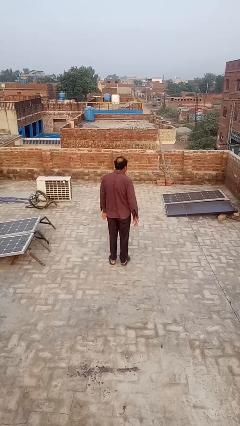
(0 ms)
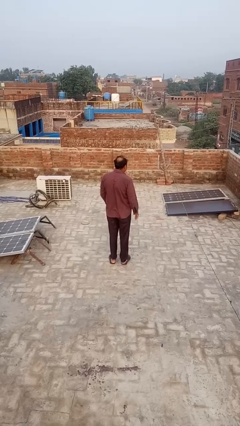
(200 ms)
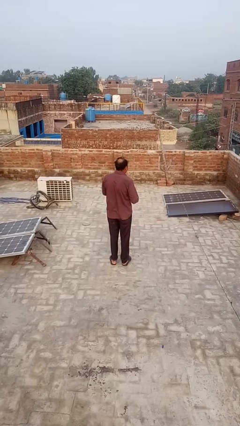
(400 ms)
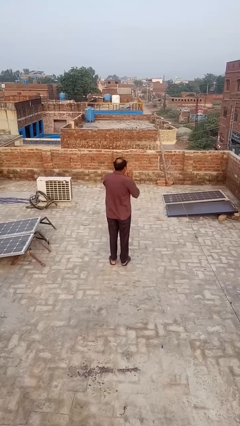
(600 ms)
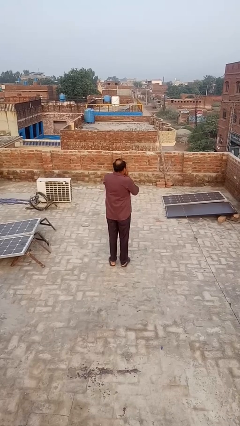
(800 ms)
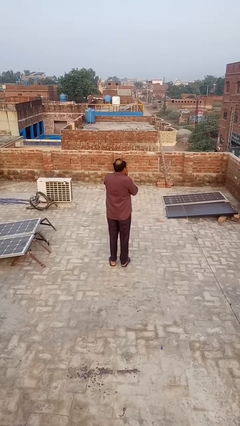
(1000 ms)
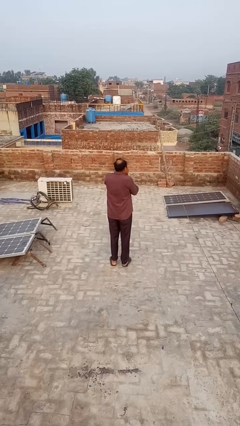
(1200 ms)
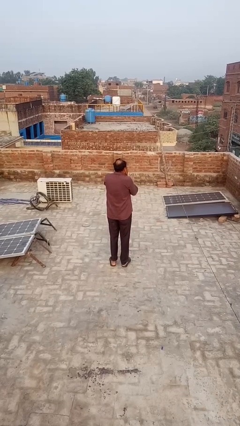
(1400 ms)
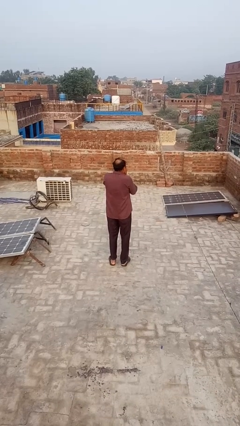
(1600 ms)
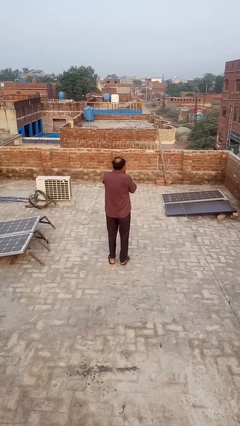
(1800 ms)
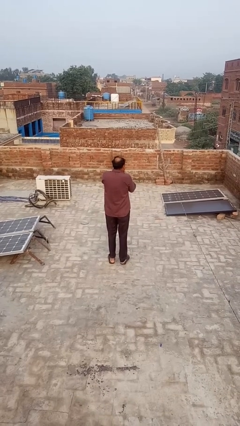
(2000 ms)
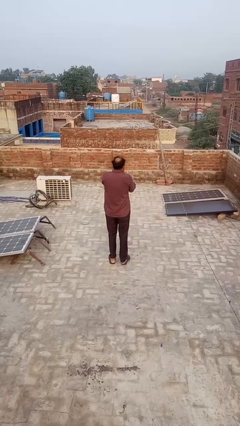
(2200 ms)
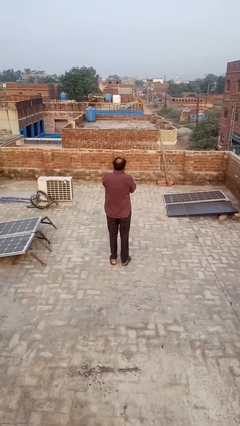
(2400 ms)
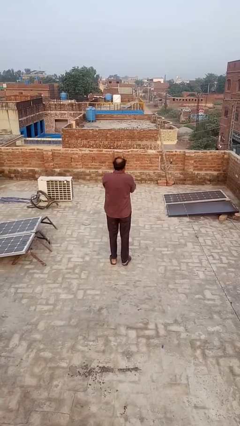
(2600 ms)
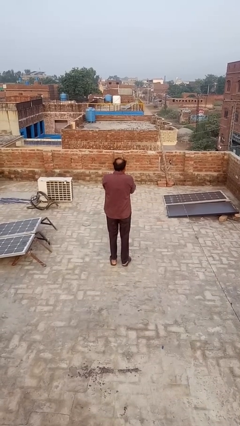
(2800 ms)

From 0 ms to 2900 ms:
person blows into hands

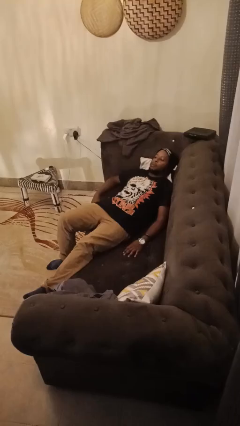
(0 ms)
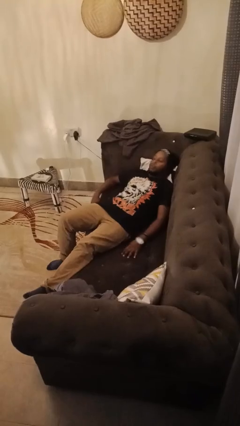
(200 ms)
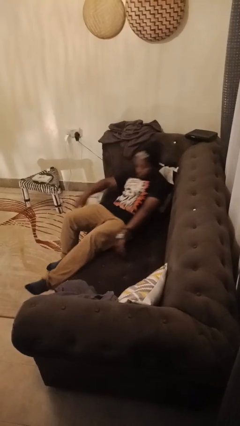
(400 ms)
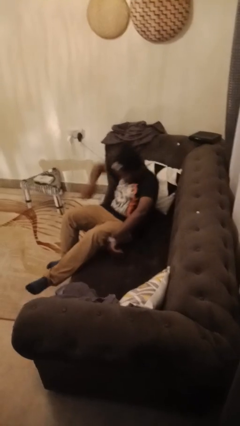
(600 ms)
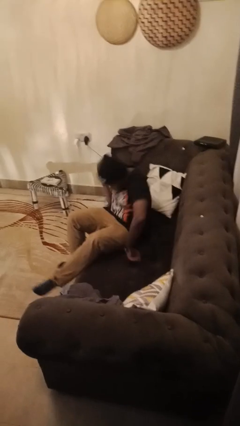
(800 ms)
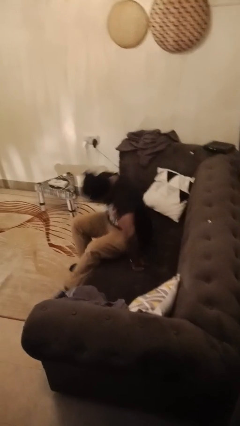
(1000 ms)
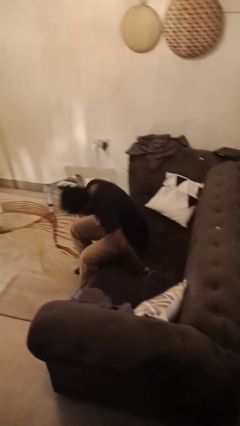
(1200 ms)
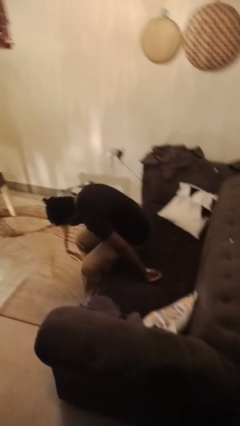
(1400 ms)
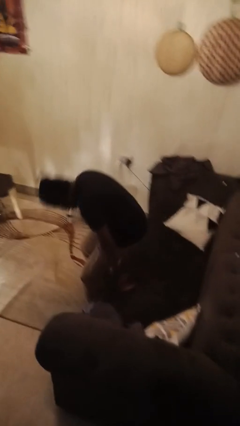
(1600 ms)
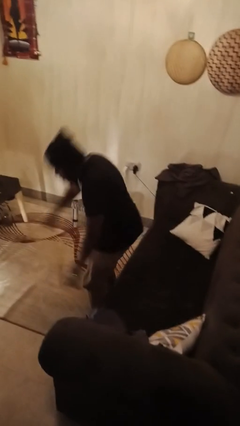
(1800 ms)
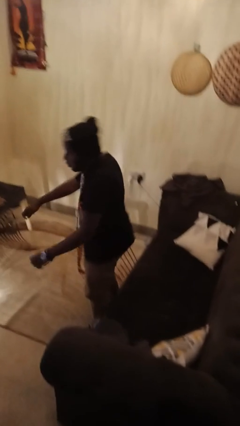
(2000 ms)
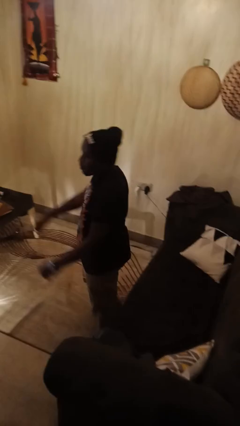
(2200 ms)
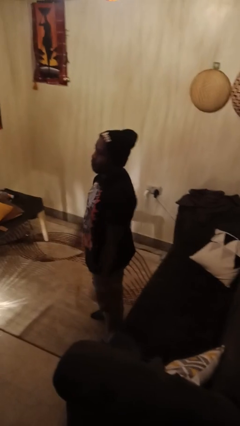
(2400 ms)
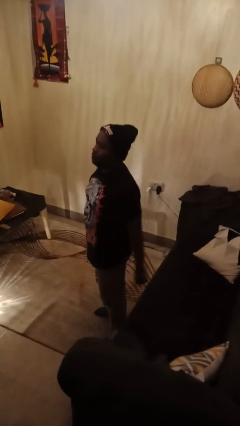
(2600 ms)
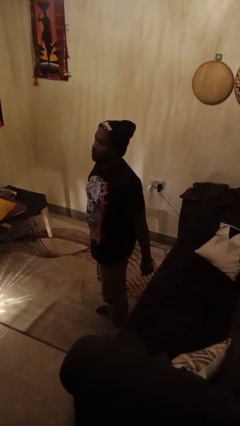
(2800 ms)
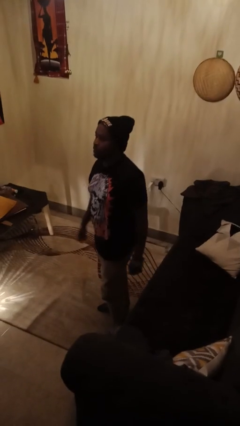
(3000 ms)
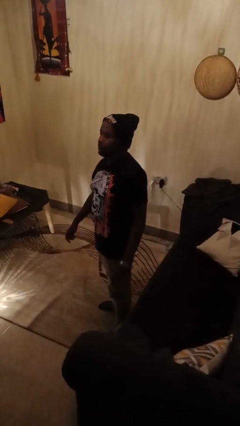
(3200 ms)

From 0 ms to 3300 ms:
person stands up

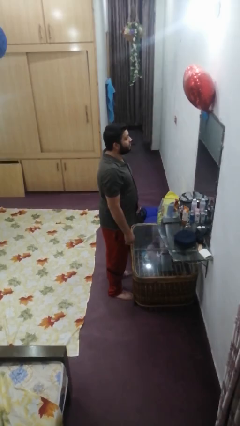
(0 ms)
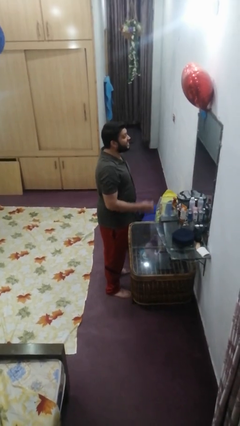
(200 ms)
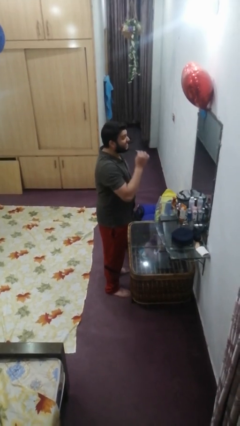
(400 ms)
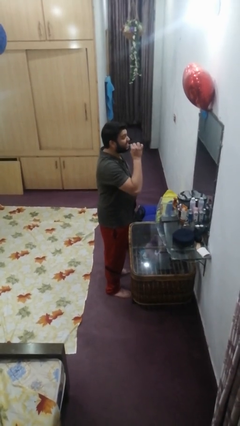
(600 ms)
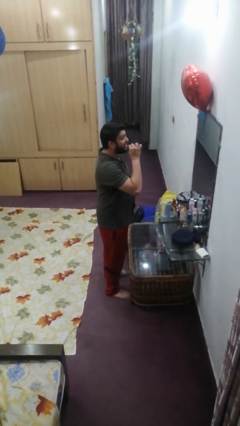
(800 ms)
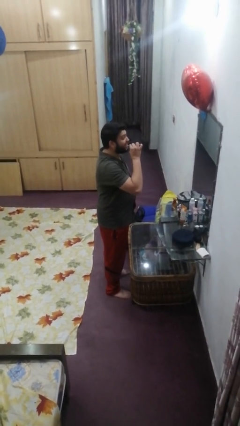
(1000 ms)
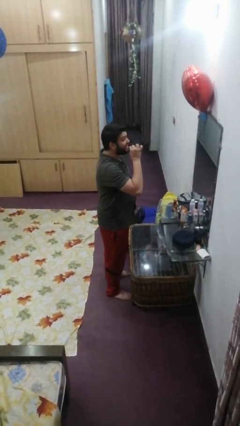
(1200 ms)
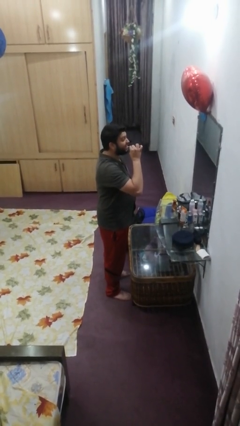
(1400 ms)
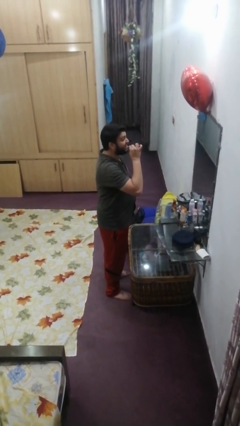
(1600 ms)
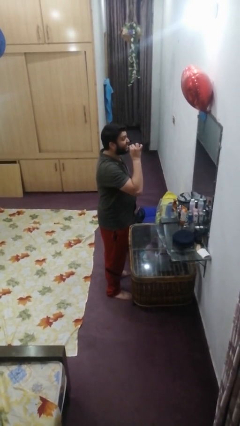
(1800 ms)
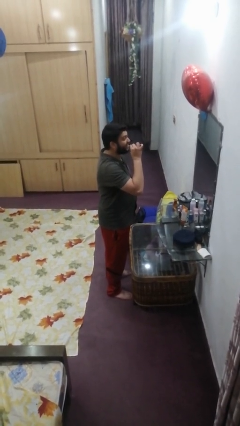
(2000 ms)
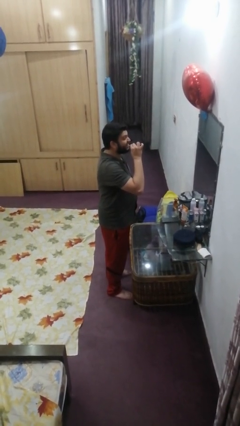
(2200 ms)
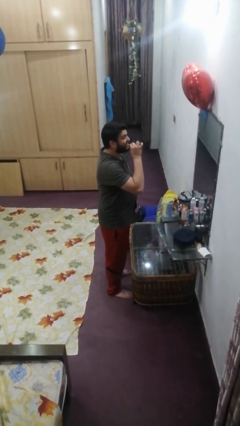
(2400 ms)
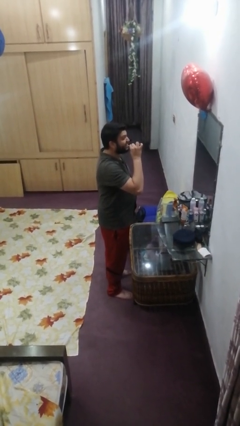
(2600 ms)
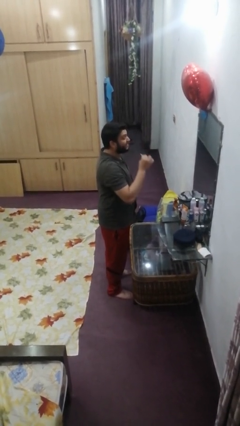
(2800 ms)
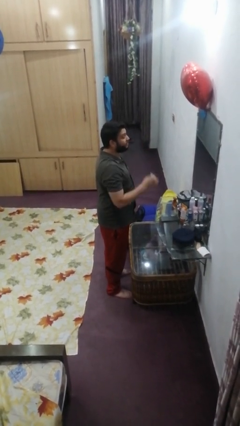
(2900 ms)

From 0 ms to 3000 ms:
person flosses

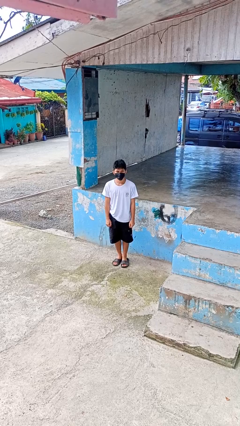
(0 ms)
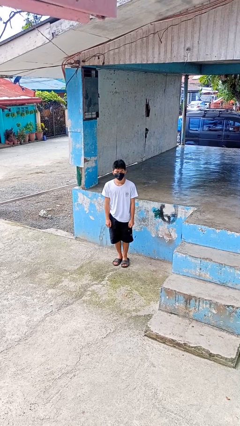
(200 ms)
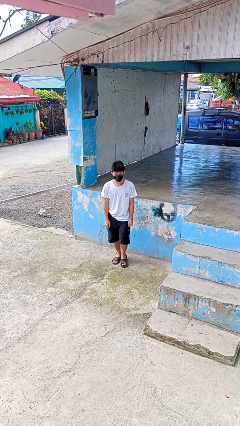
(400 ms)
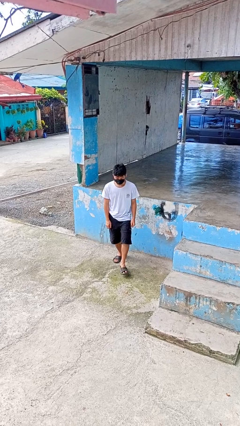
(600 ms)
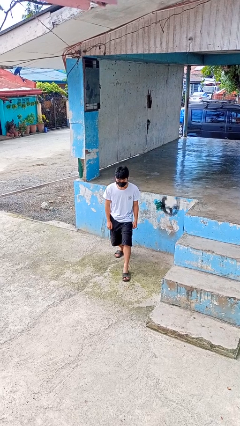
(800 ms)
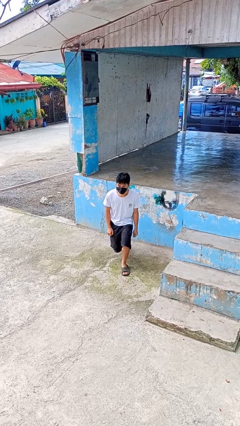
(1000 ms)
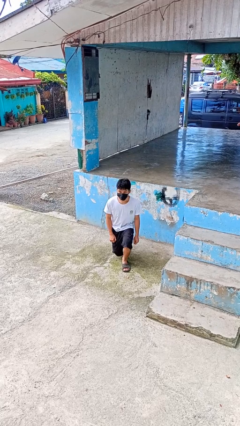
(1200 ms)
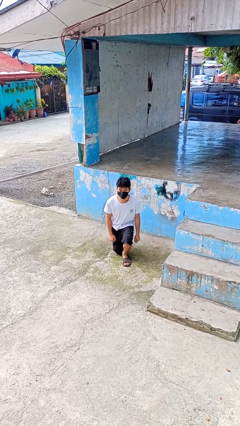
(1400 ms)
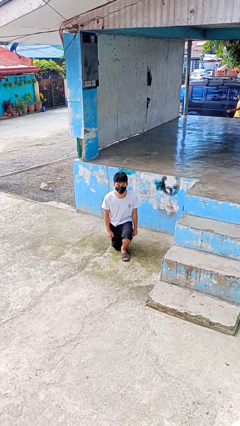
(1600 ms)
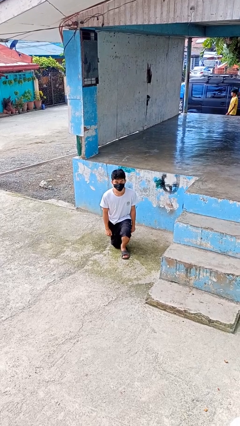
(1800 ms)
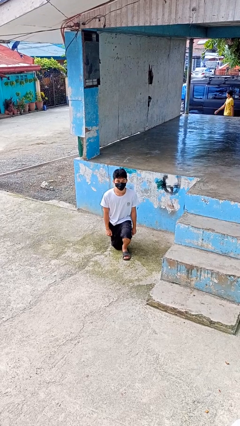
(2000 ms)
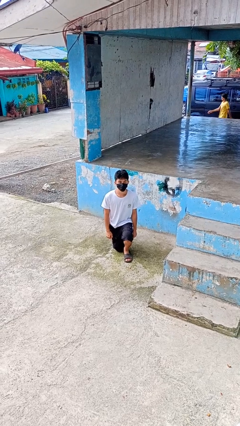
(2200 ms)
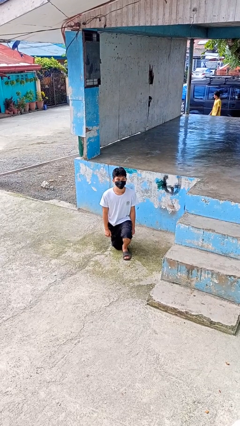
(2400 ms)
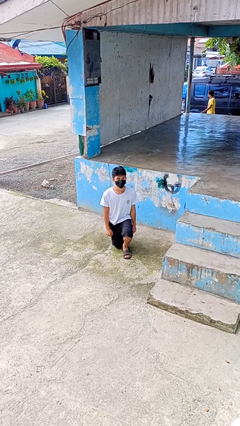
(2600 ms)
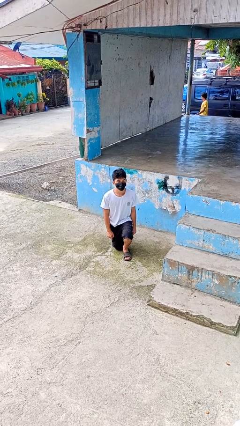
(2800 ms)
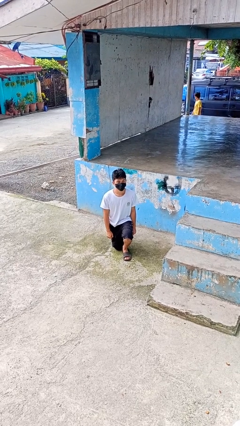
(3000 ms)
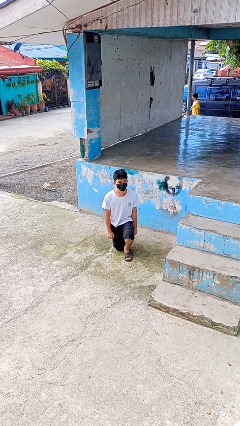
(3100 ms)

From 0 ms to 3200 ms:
person kneels

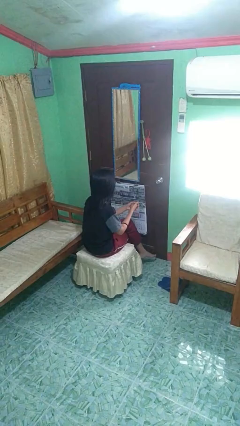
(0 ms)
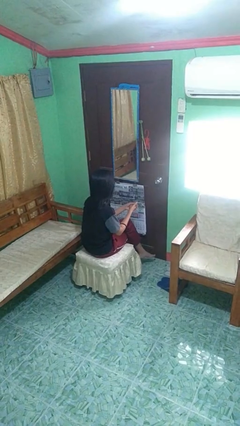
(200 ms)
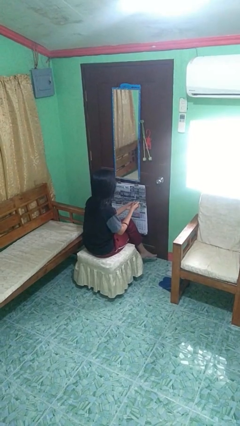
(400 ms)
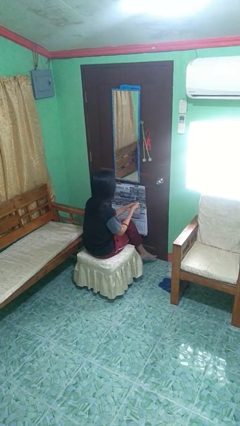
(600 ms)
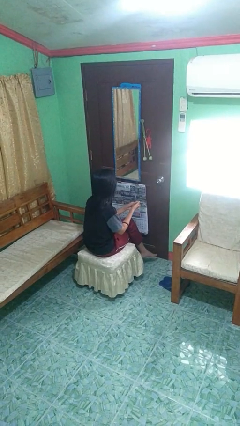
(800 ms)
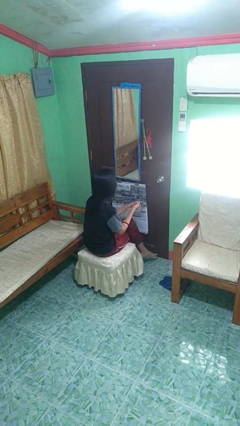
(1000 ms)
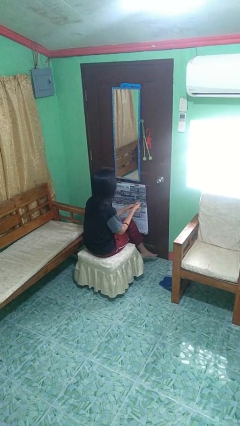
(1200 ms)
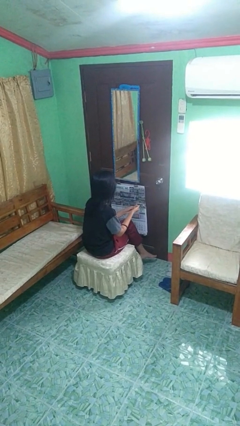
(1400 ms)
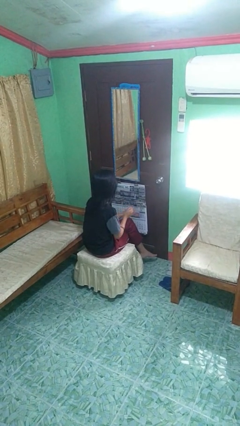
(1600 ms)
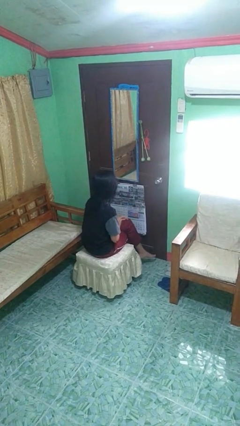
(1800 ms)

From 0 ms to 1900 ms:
person cracks knuckles

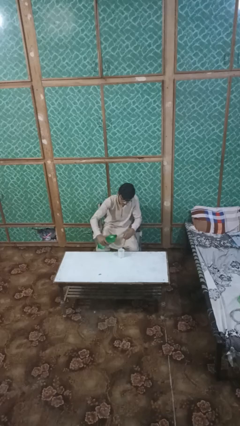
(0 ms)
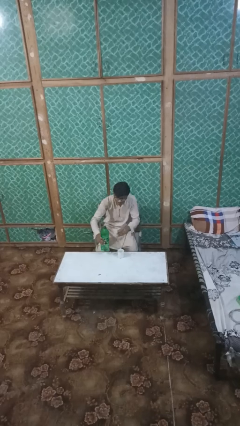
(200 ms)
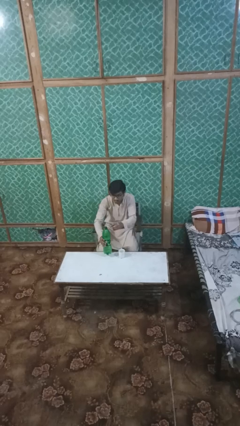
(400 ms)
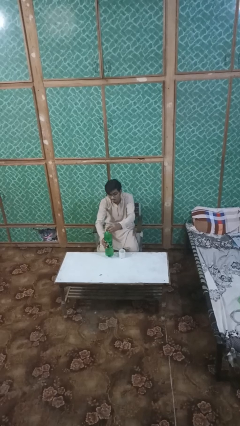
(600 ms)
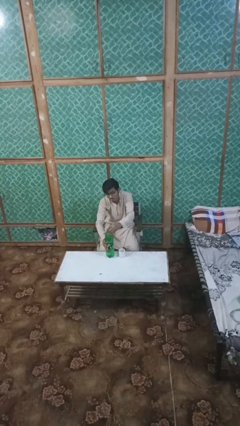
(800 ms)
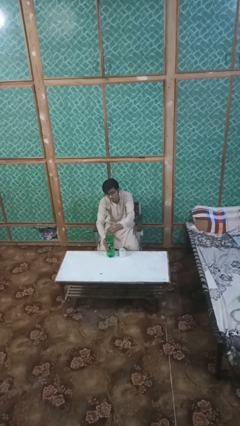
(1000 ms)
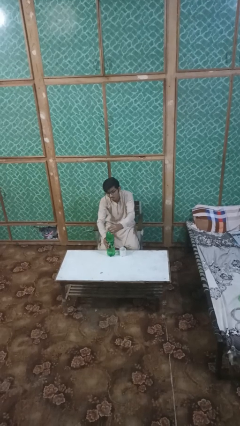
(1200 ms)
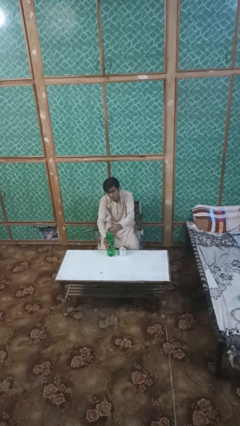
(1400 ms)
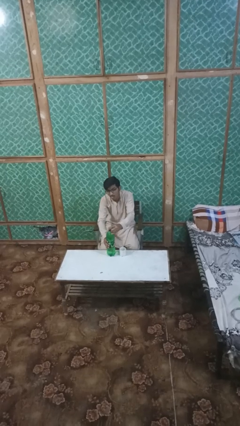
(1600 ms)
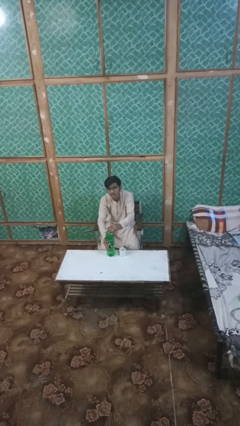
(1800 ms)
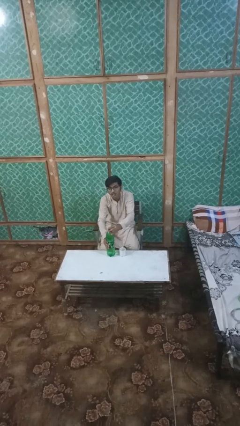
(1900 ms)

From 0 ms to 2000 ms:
person screws lid to bottle

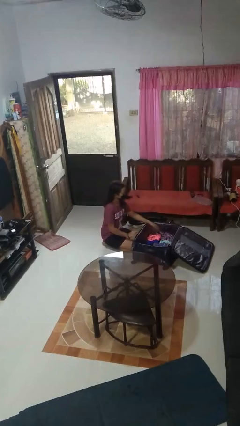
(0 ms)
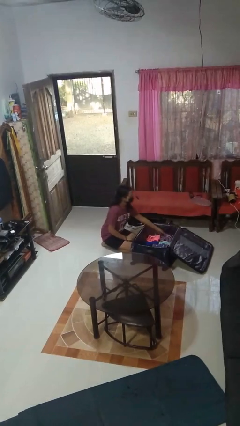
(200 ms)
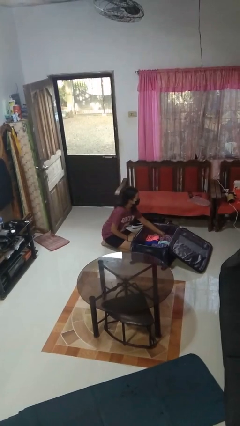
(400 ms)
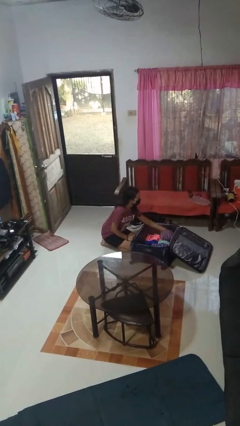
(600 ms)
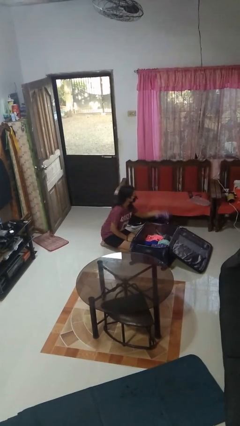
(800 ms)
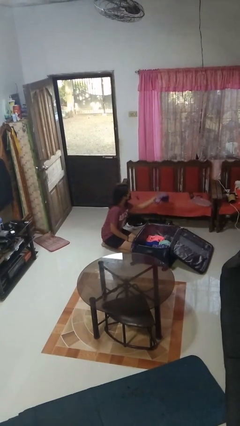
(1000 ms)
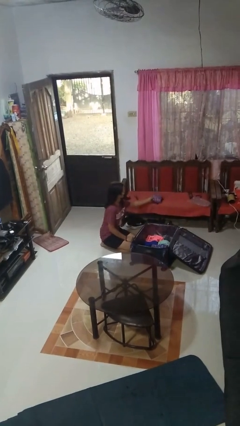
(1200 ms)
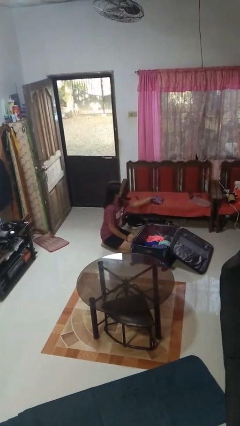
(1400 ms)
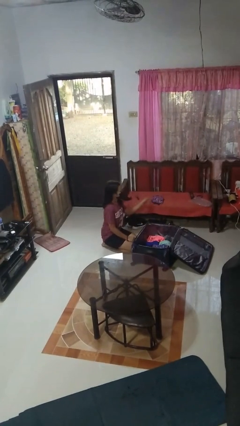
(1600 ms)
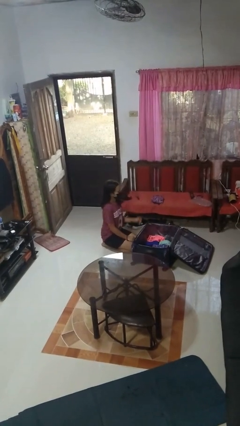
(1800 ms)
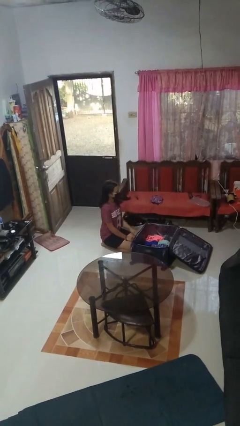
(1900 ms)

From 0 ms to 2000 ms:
person unloads clothes from suitcase
